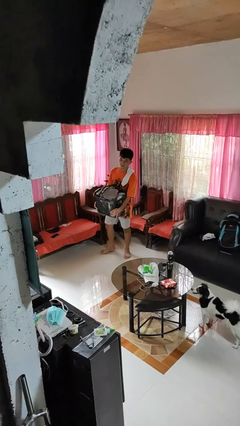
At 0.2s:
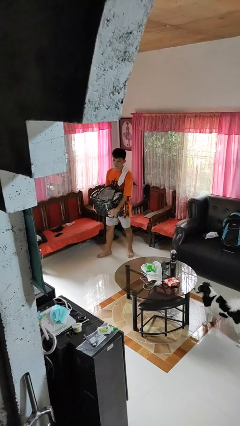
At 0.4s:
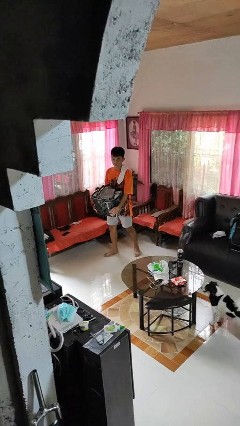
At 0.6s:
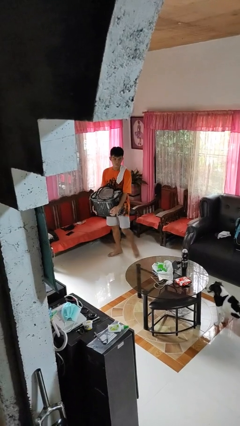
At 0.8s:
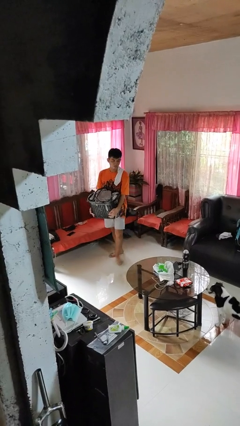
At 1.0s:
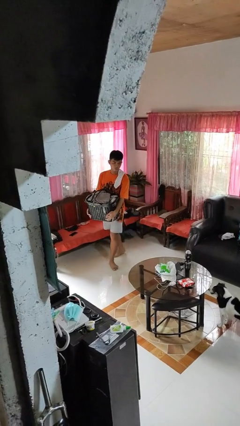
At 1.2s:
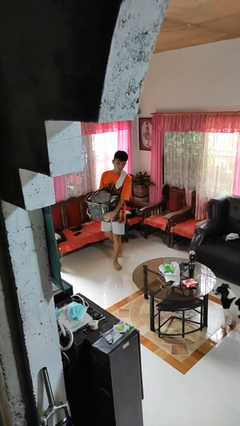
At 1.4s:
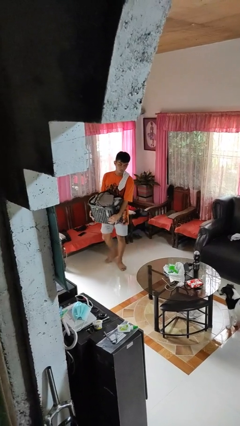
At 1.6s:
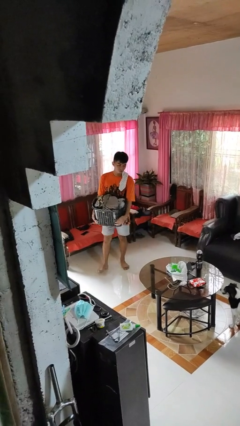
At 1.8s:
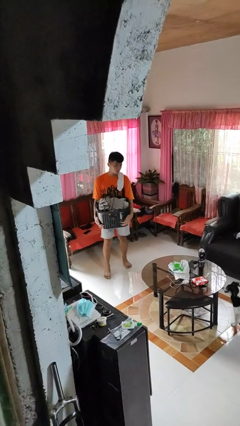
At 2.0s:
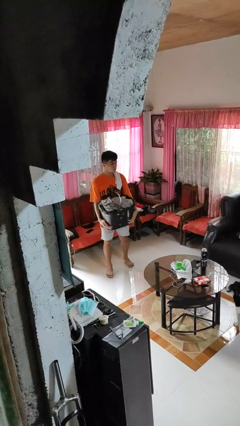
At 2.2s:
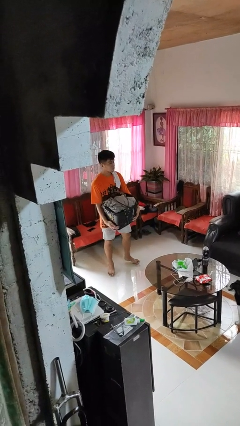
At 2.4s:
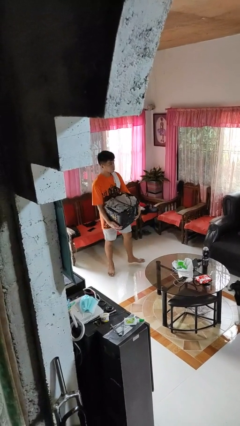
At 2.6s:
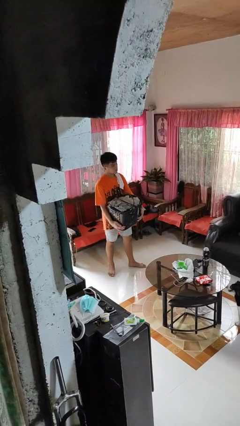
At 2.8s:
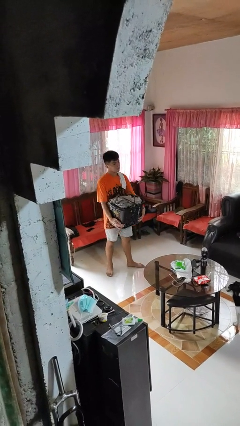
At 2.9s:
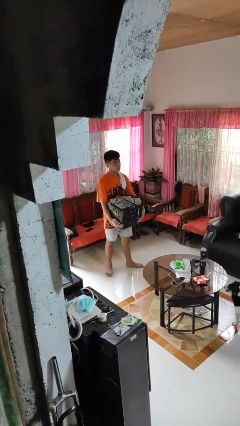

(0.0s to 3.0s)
person carries laundry basket

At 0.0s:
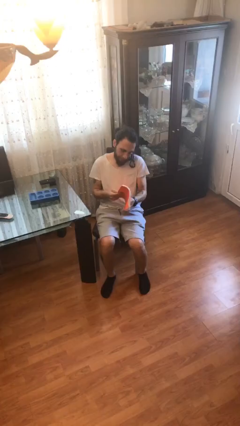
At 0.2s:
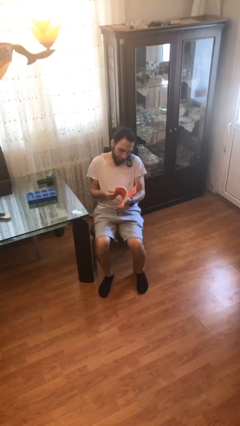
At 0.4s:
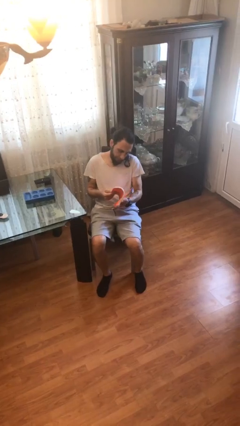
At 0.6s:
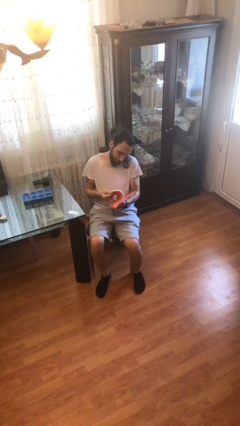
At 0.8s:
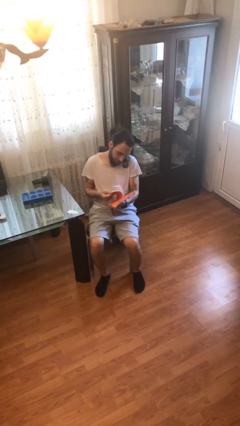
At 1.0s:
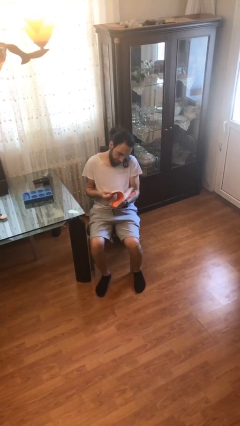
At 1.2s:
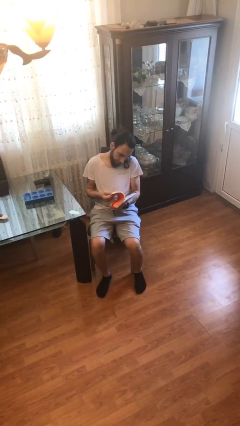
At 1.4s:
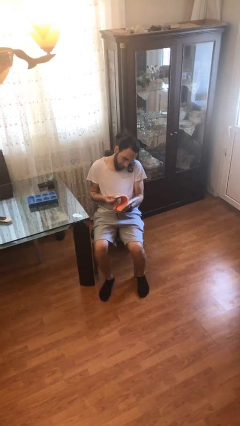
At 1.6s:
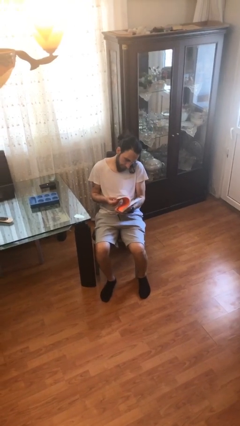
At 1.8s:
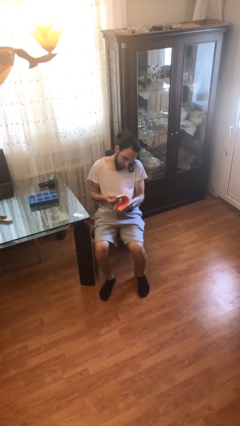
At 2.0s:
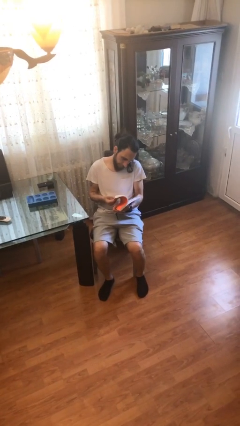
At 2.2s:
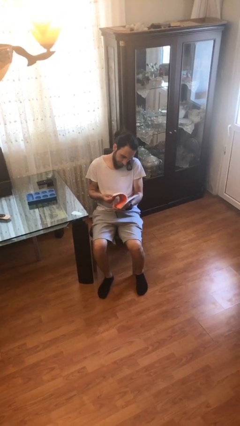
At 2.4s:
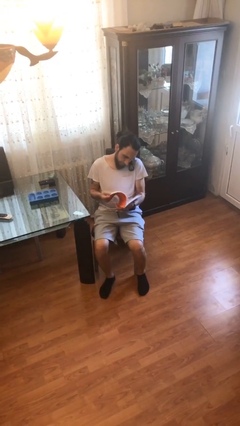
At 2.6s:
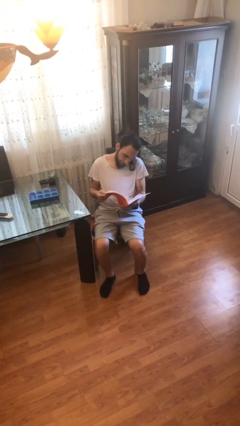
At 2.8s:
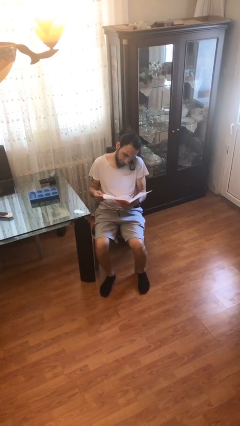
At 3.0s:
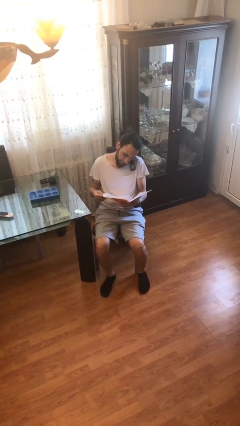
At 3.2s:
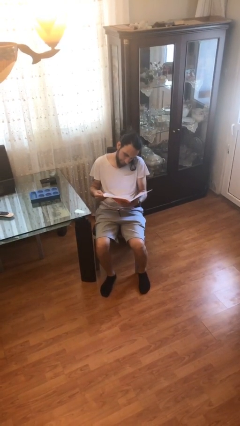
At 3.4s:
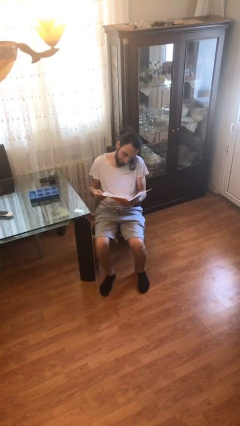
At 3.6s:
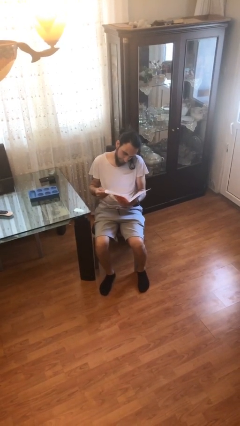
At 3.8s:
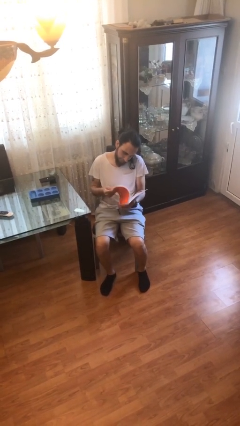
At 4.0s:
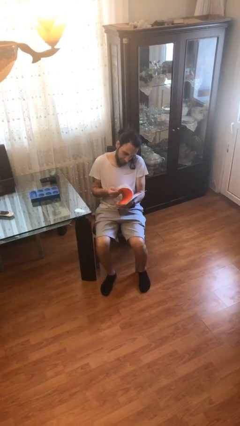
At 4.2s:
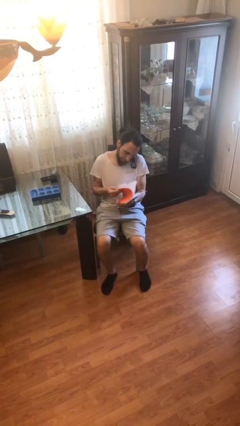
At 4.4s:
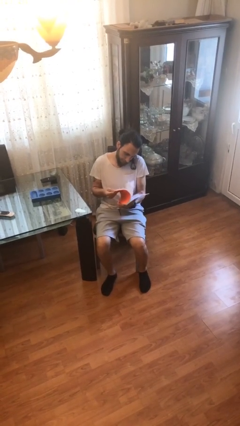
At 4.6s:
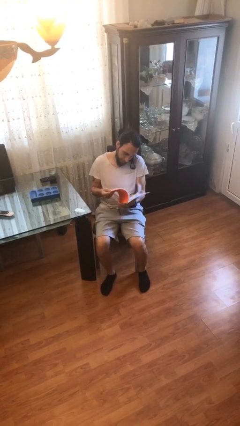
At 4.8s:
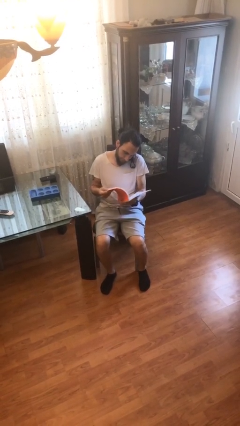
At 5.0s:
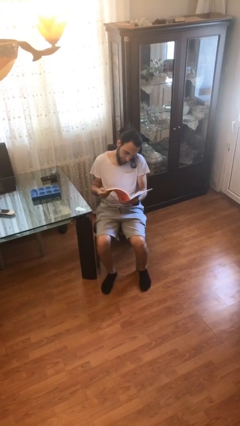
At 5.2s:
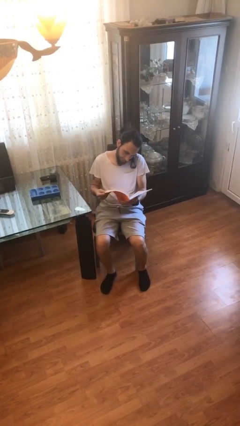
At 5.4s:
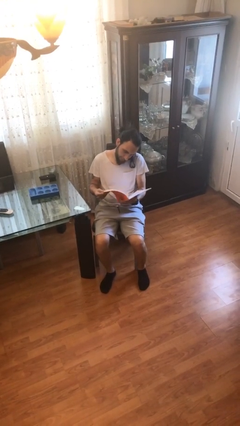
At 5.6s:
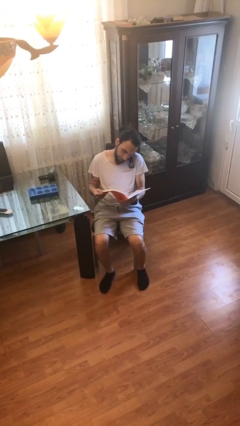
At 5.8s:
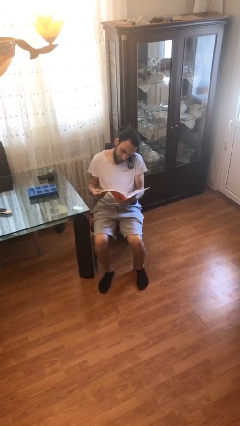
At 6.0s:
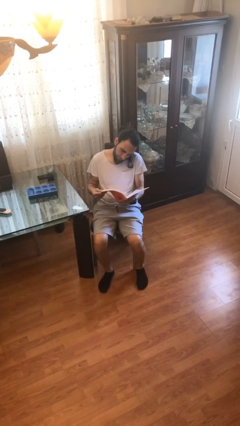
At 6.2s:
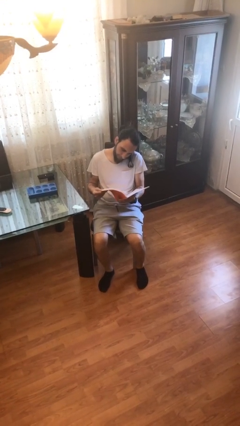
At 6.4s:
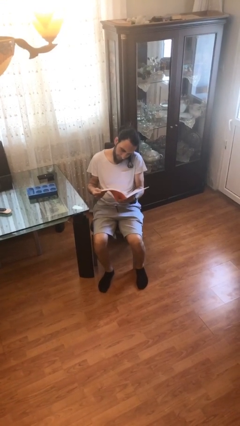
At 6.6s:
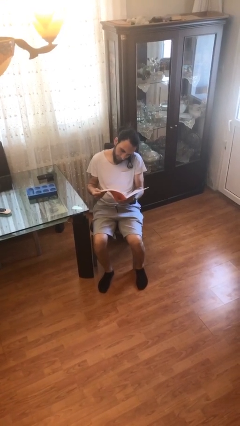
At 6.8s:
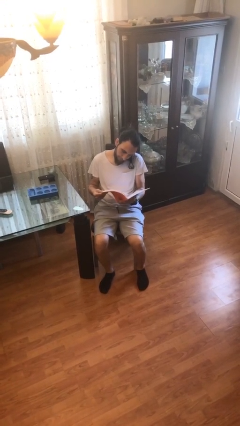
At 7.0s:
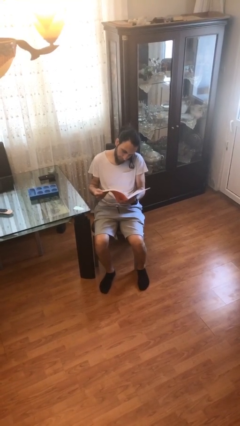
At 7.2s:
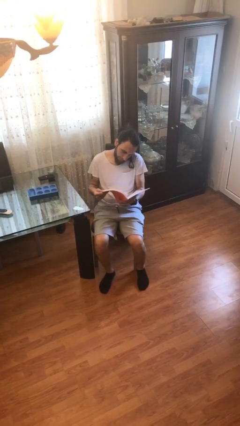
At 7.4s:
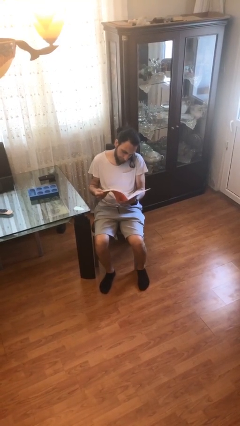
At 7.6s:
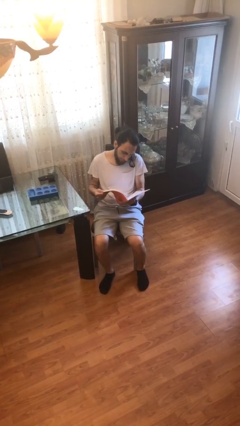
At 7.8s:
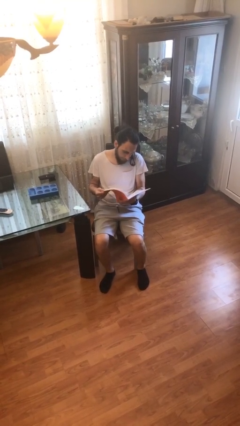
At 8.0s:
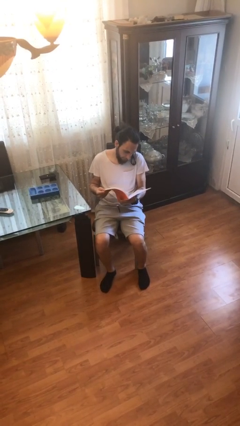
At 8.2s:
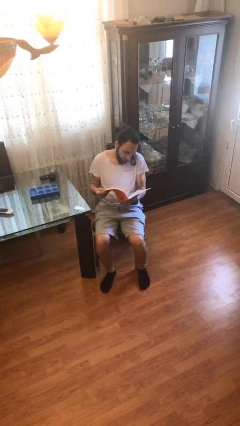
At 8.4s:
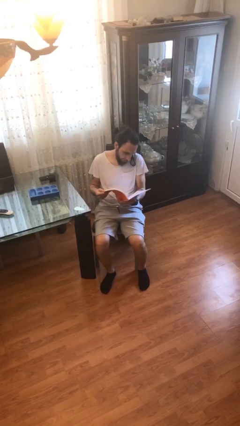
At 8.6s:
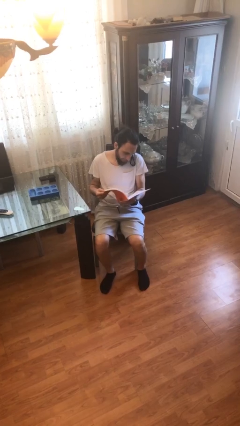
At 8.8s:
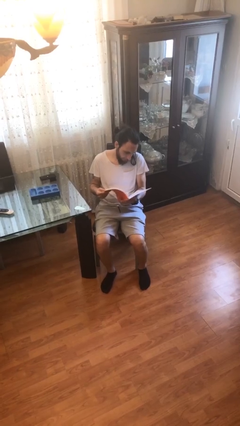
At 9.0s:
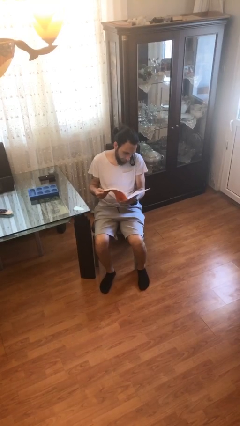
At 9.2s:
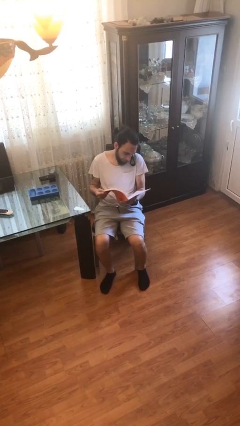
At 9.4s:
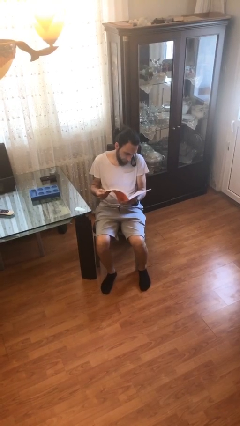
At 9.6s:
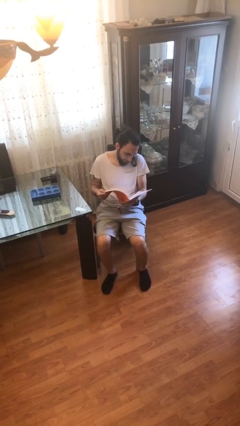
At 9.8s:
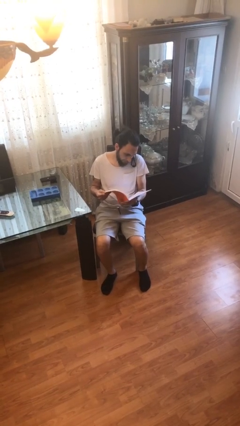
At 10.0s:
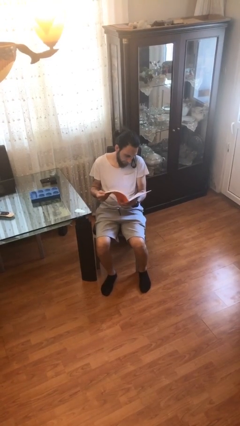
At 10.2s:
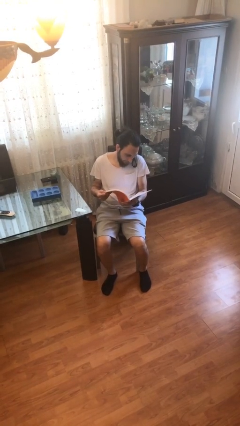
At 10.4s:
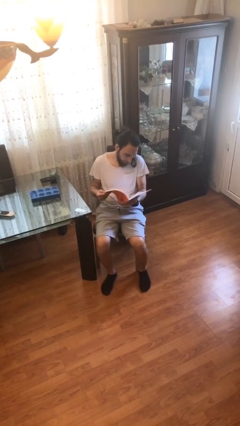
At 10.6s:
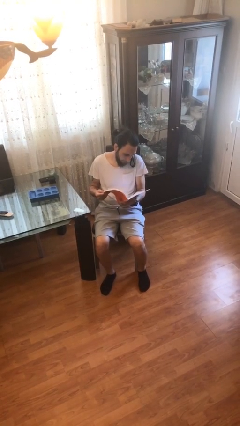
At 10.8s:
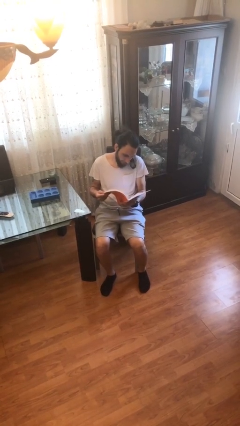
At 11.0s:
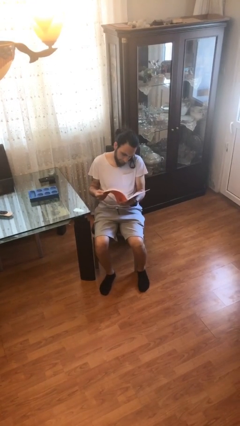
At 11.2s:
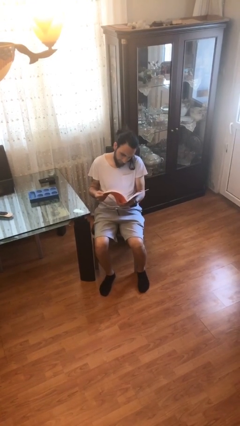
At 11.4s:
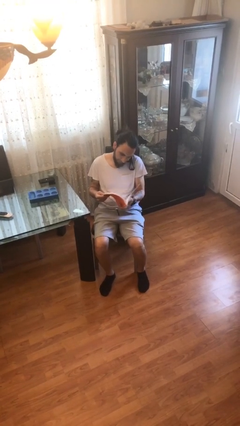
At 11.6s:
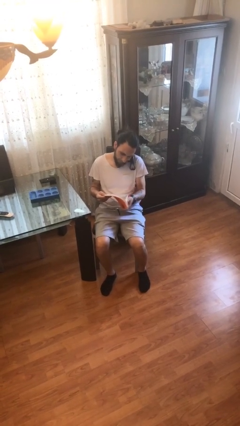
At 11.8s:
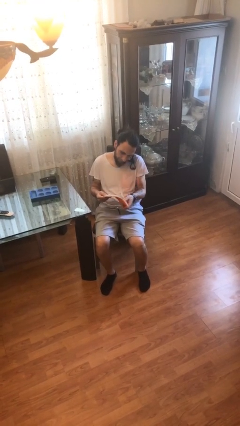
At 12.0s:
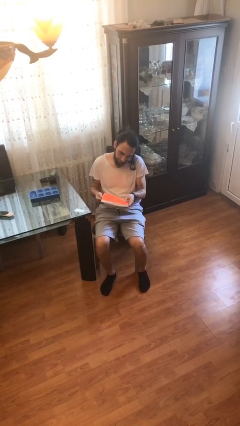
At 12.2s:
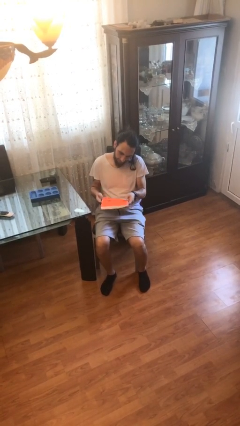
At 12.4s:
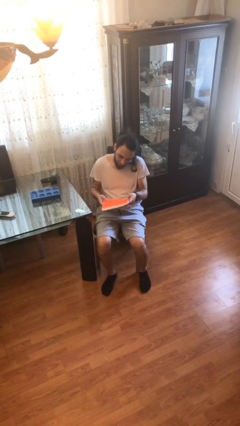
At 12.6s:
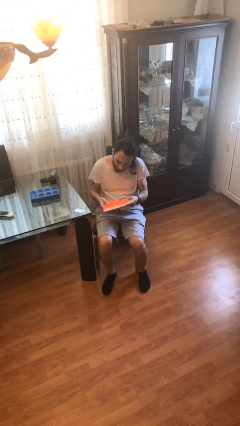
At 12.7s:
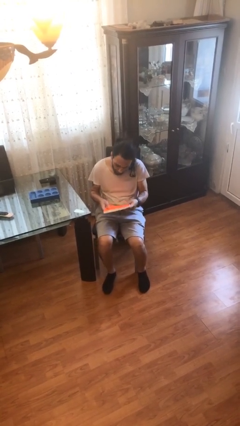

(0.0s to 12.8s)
person reads document

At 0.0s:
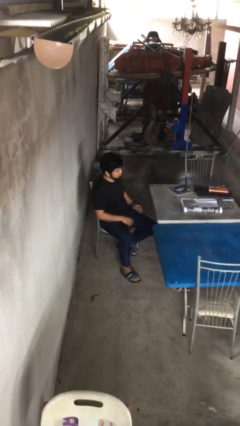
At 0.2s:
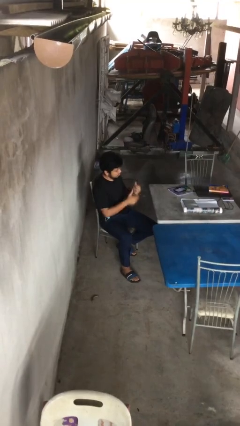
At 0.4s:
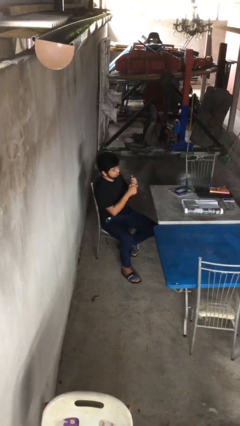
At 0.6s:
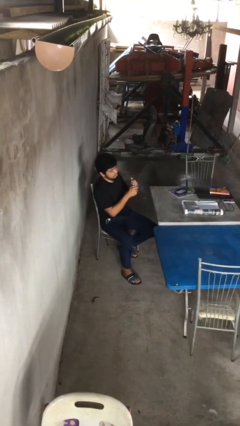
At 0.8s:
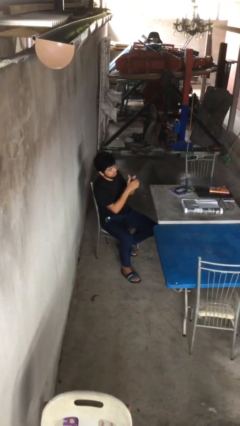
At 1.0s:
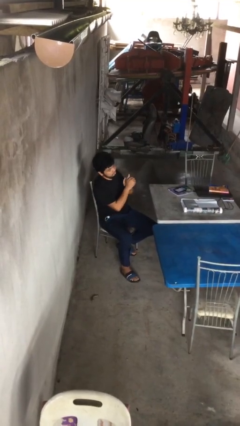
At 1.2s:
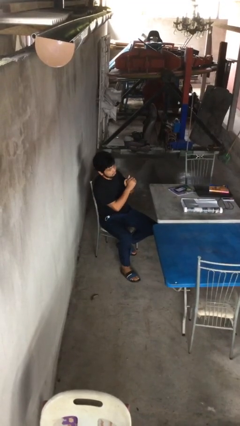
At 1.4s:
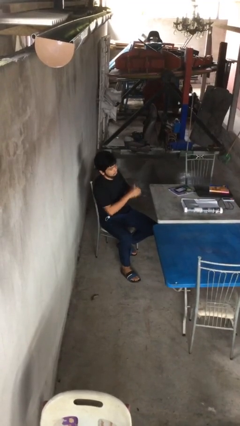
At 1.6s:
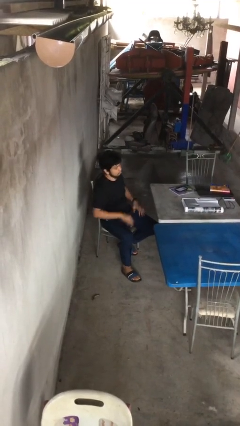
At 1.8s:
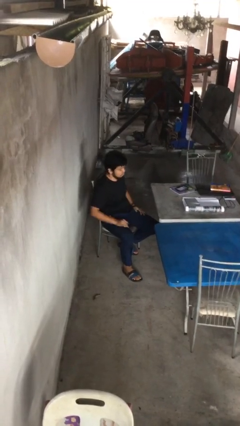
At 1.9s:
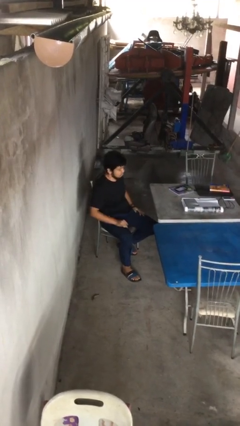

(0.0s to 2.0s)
person cracks knuckles

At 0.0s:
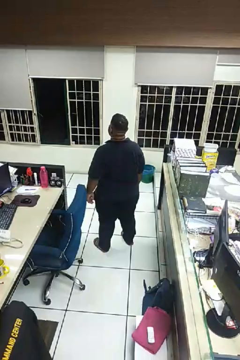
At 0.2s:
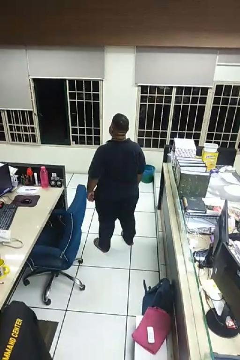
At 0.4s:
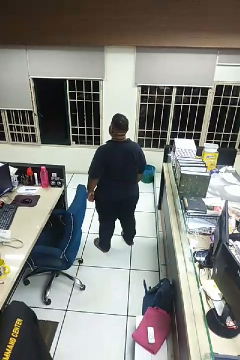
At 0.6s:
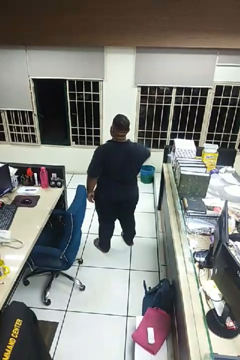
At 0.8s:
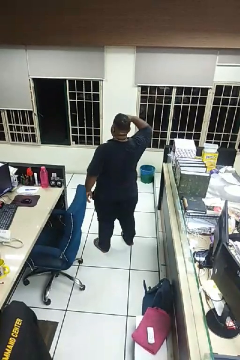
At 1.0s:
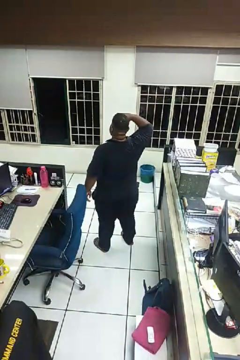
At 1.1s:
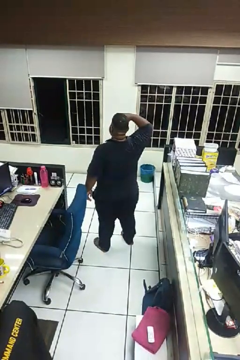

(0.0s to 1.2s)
person salutes
